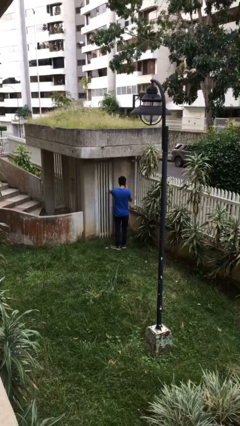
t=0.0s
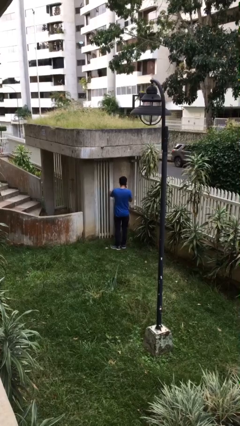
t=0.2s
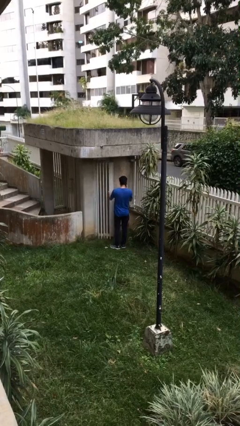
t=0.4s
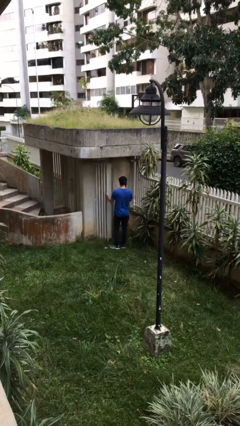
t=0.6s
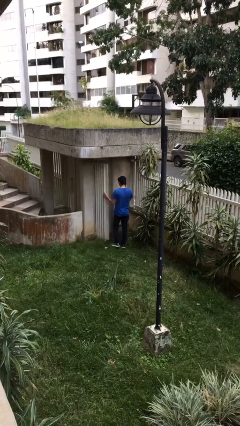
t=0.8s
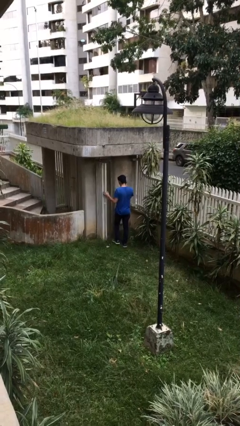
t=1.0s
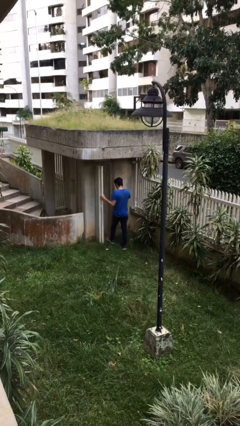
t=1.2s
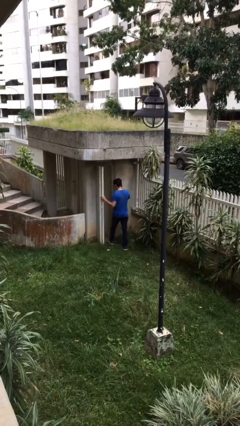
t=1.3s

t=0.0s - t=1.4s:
person opens facility door

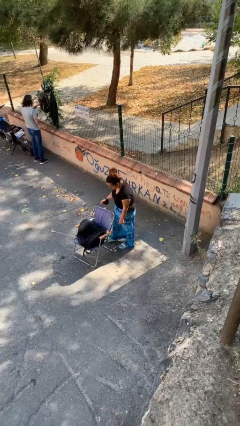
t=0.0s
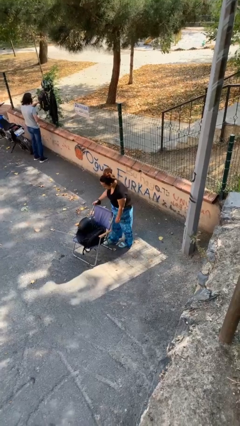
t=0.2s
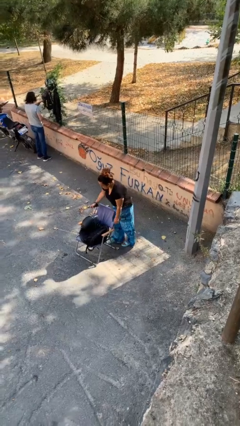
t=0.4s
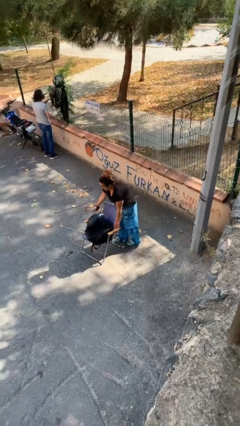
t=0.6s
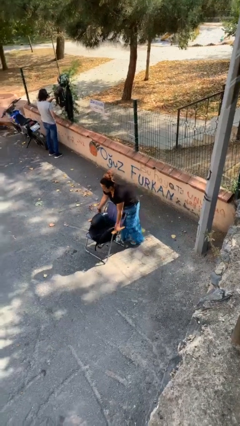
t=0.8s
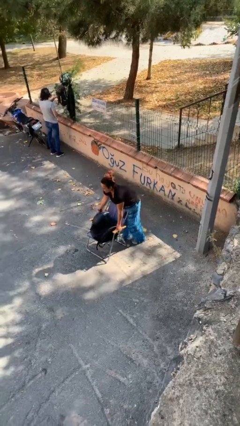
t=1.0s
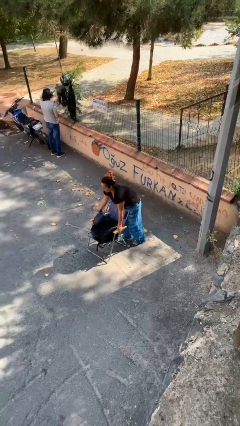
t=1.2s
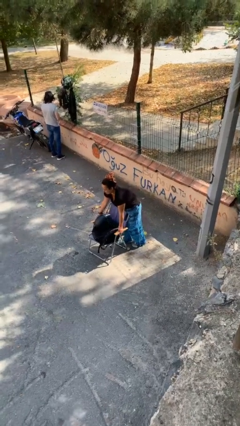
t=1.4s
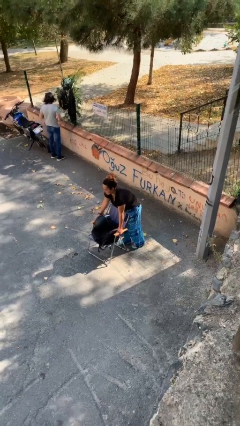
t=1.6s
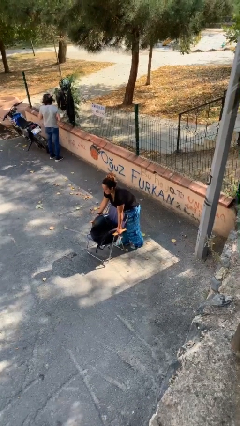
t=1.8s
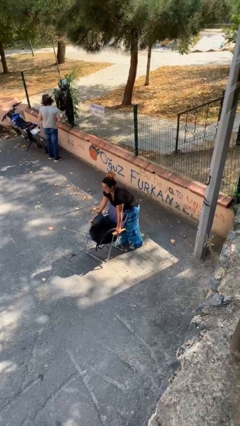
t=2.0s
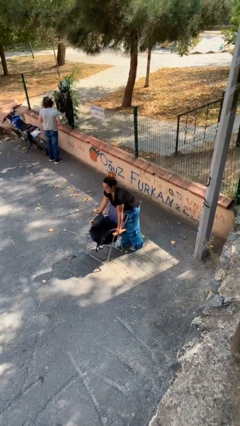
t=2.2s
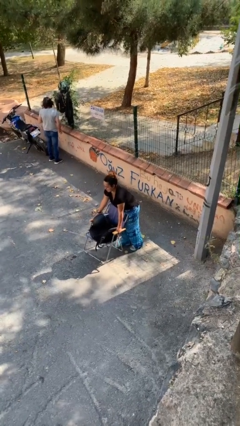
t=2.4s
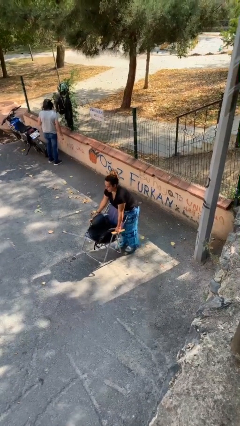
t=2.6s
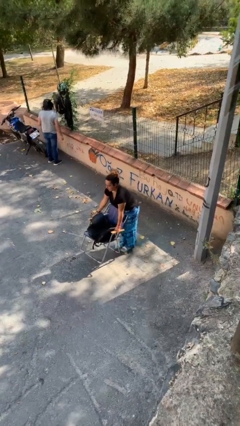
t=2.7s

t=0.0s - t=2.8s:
person picks up object from floor

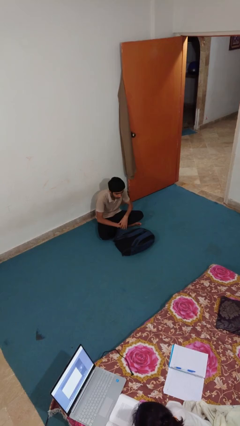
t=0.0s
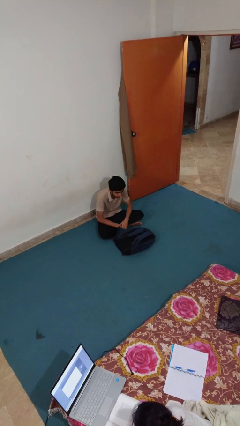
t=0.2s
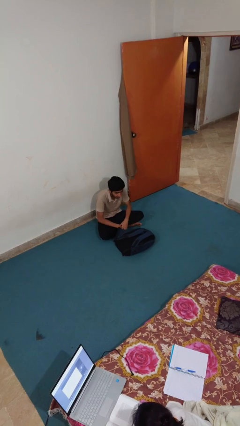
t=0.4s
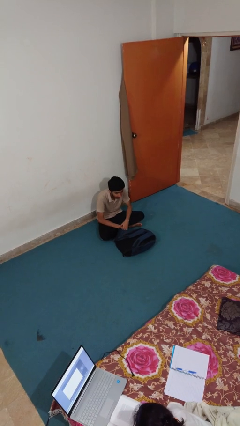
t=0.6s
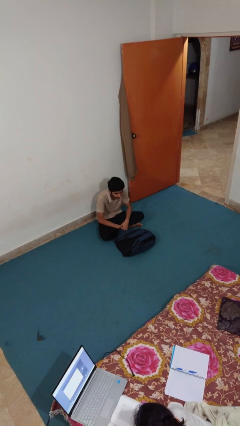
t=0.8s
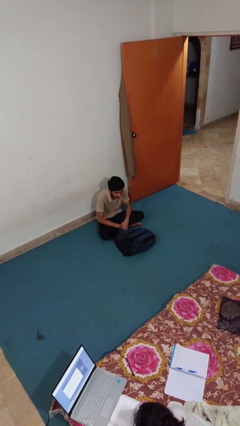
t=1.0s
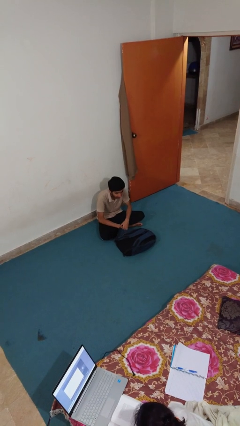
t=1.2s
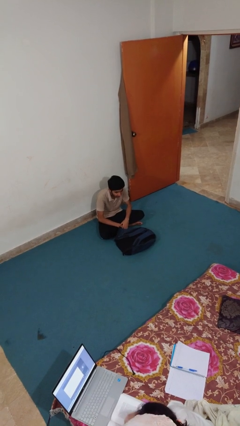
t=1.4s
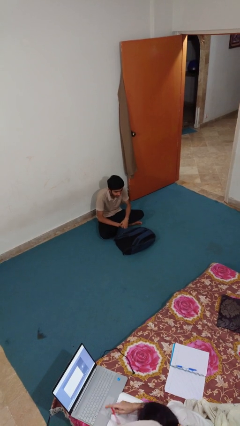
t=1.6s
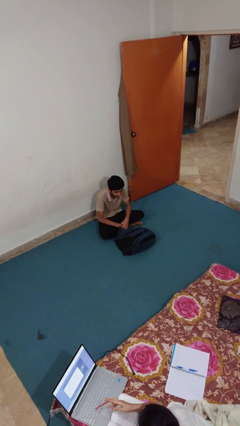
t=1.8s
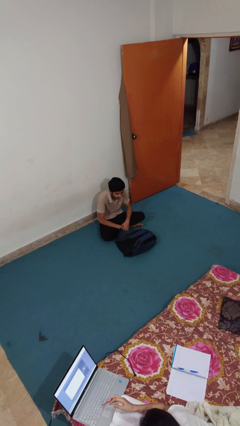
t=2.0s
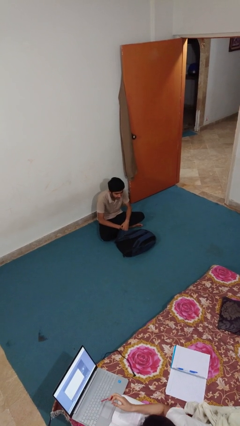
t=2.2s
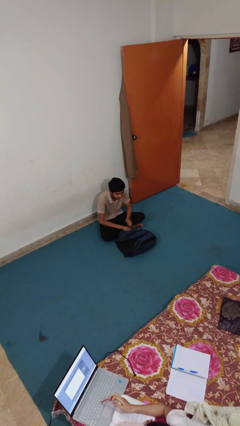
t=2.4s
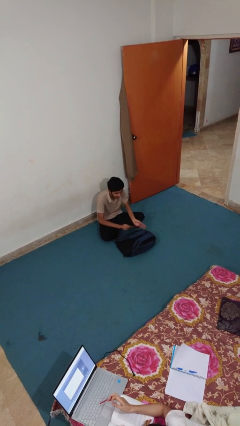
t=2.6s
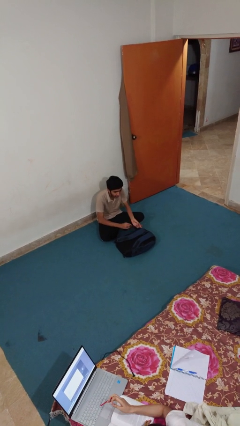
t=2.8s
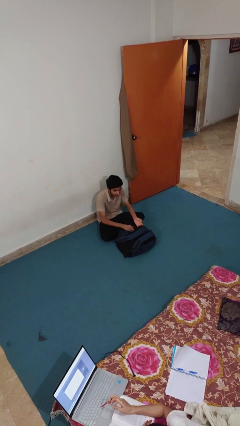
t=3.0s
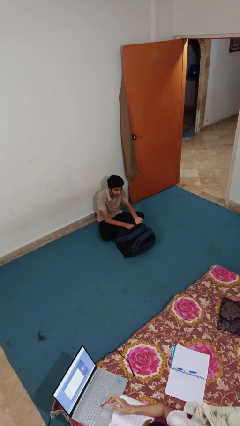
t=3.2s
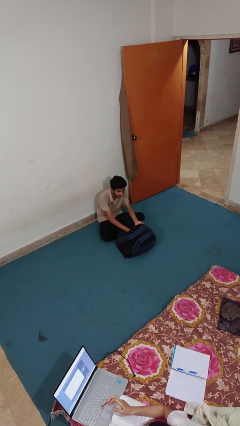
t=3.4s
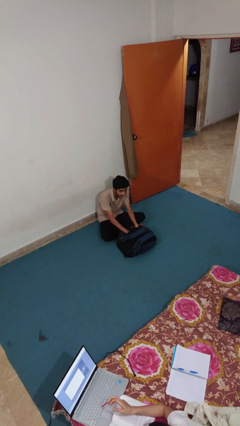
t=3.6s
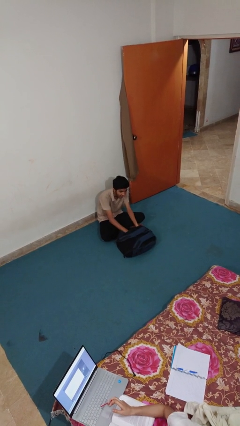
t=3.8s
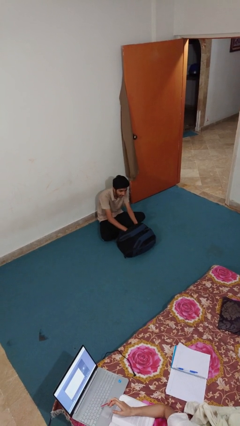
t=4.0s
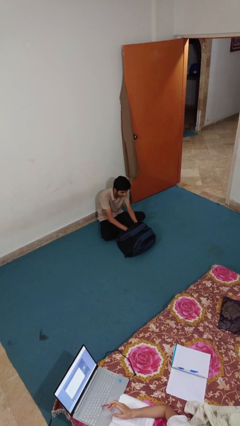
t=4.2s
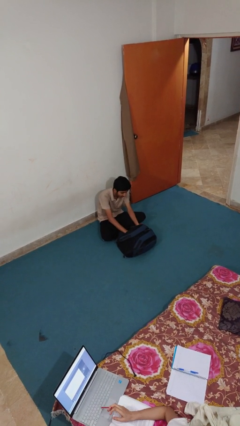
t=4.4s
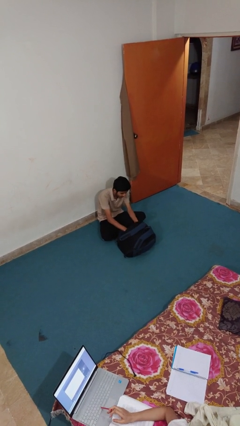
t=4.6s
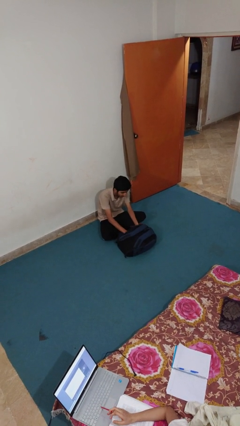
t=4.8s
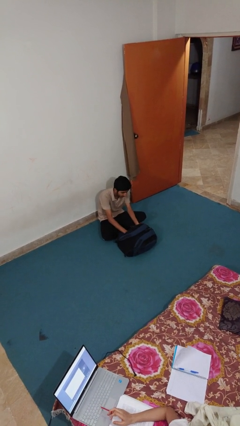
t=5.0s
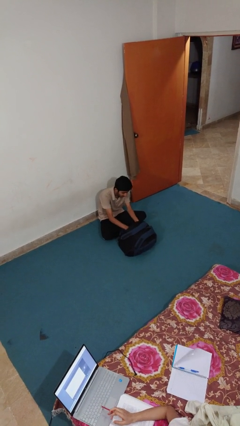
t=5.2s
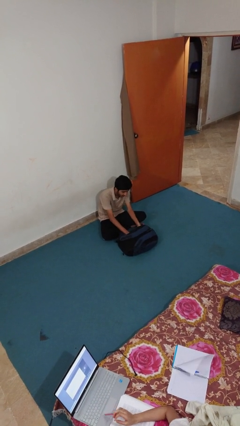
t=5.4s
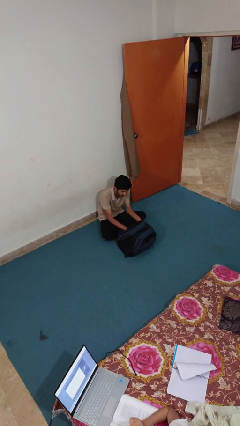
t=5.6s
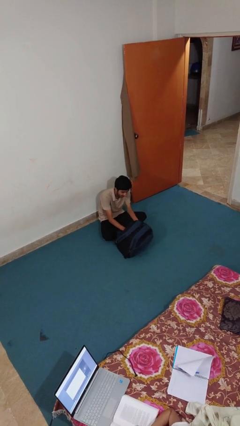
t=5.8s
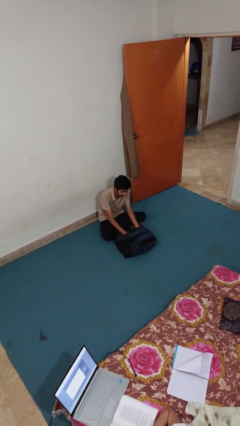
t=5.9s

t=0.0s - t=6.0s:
person sweeps floor

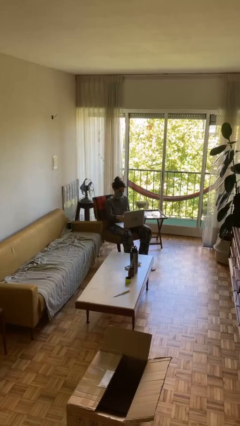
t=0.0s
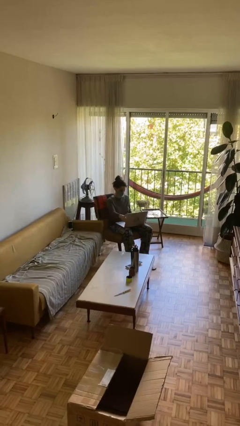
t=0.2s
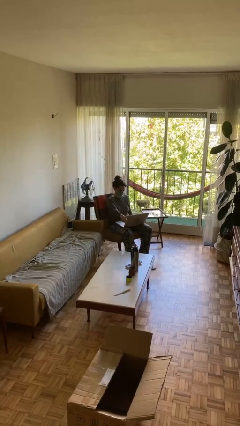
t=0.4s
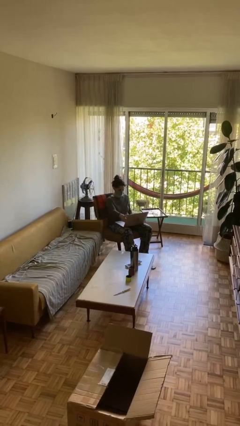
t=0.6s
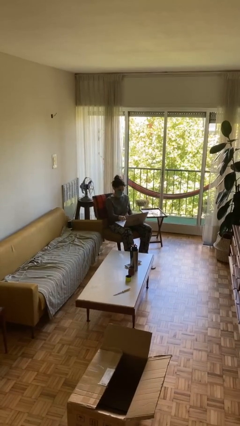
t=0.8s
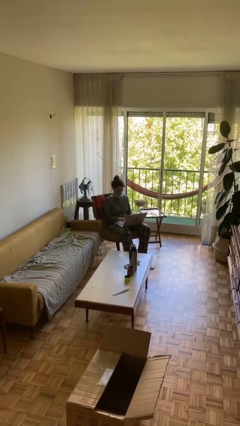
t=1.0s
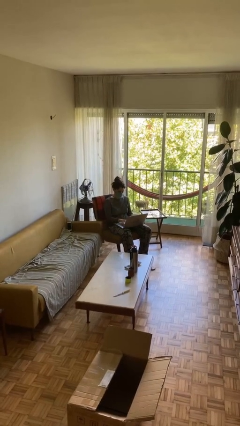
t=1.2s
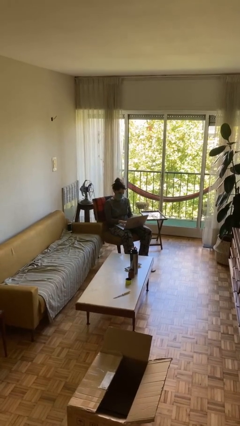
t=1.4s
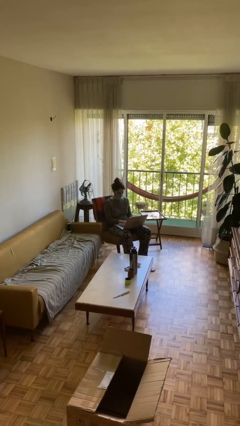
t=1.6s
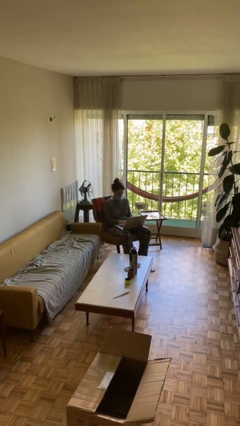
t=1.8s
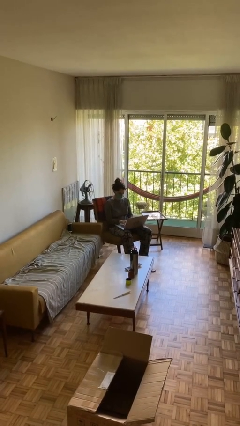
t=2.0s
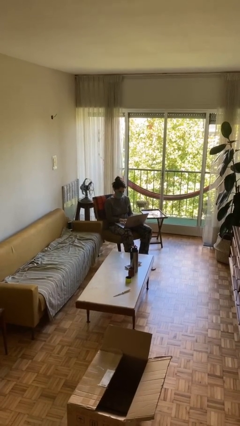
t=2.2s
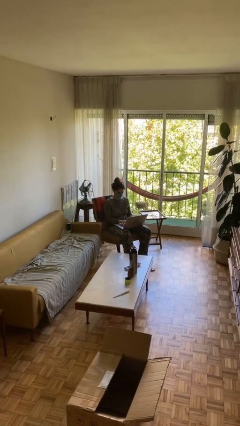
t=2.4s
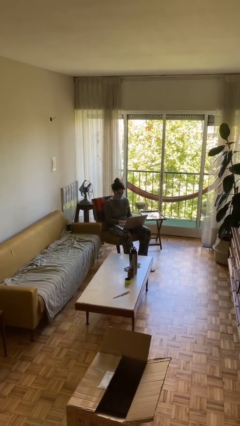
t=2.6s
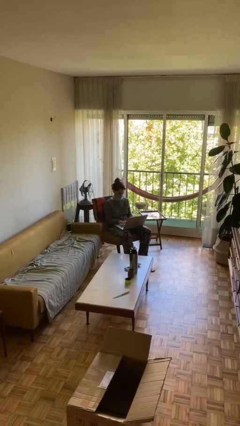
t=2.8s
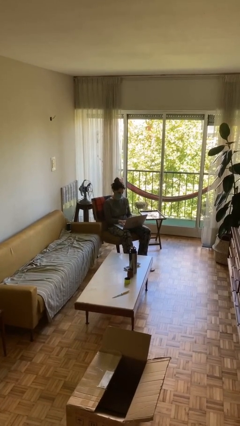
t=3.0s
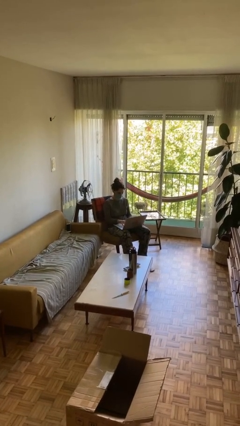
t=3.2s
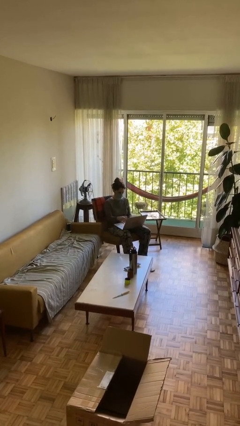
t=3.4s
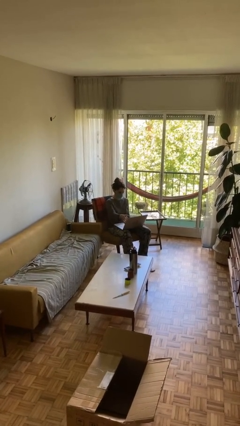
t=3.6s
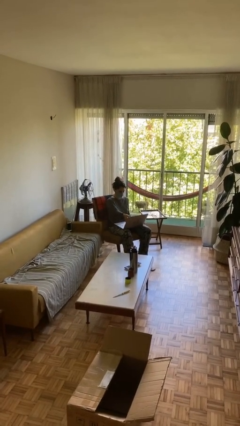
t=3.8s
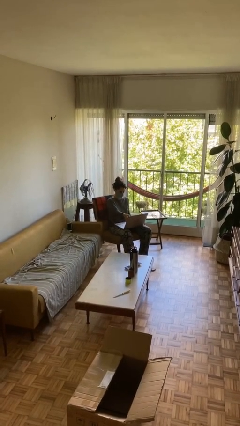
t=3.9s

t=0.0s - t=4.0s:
person interacts with laptop

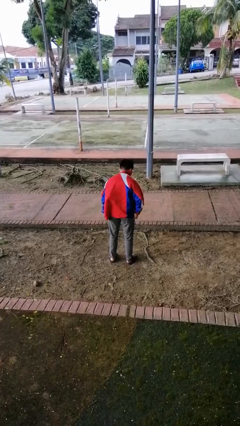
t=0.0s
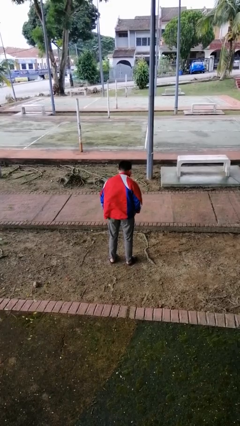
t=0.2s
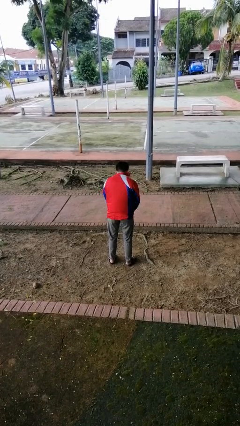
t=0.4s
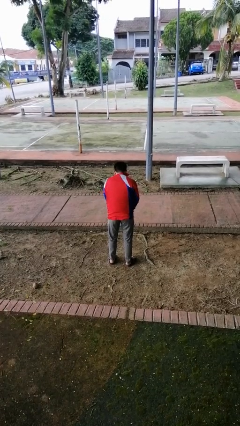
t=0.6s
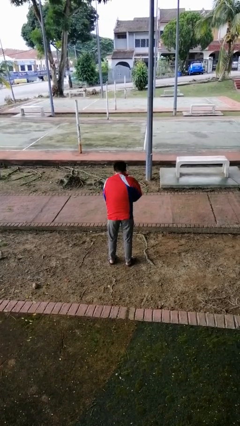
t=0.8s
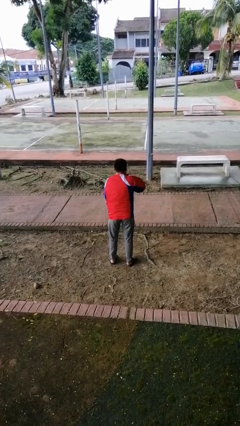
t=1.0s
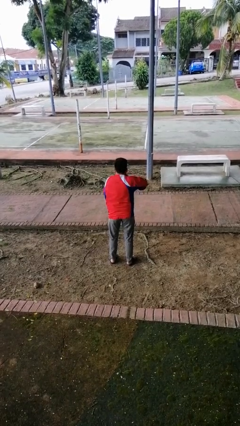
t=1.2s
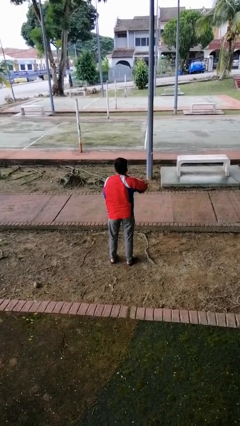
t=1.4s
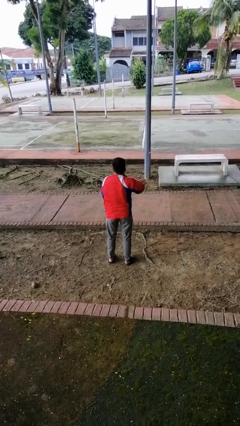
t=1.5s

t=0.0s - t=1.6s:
person zips up jacket

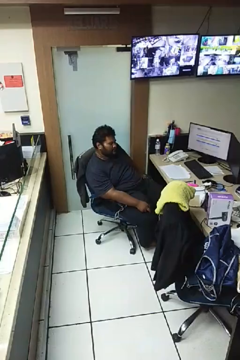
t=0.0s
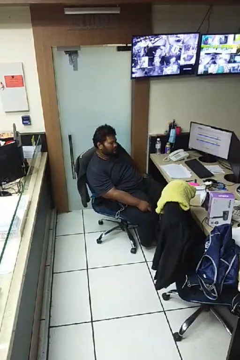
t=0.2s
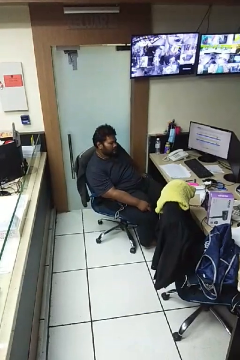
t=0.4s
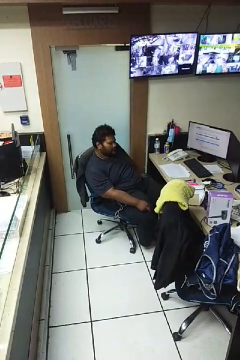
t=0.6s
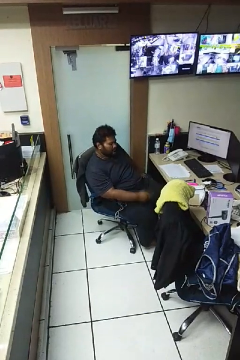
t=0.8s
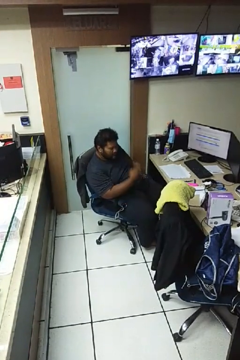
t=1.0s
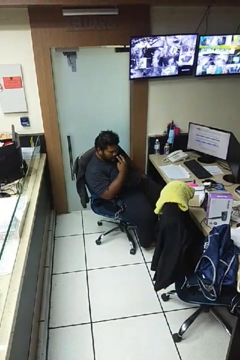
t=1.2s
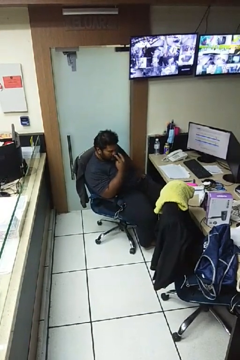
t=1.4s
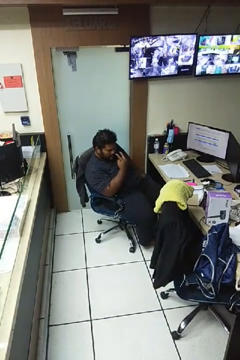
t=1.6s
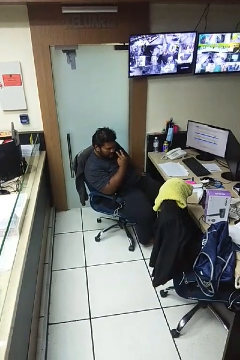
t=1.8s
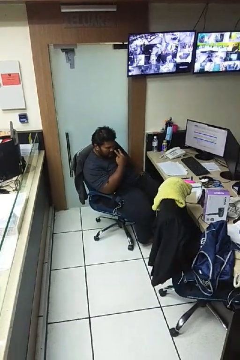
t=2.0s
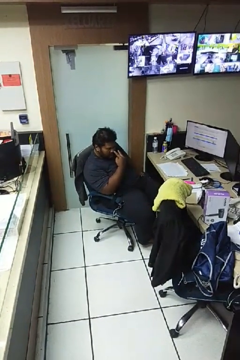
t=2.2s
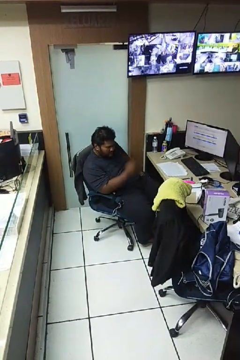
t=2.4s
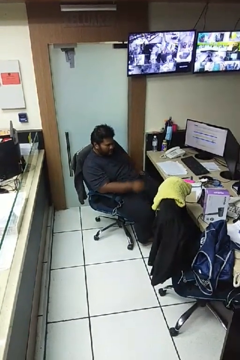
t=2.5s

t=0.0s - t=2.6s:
person gestures watch closely
